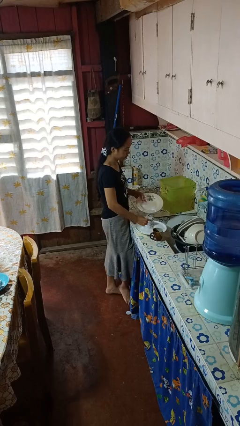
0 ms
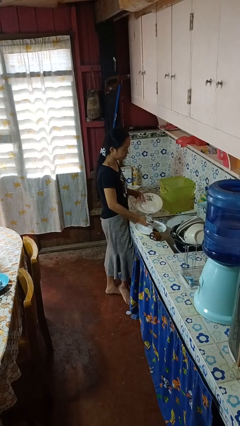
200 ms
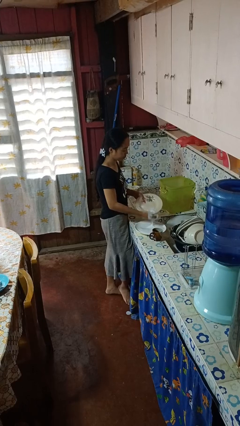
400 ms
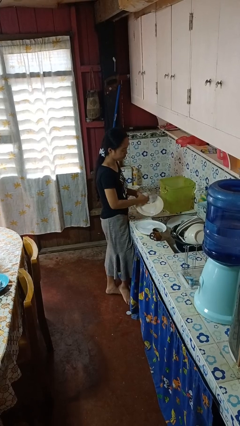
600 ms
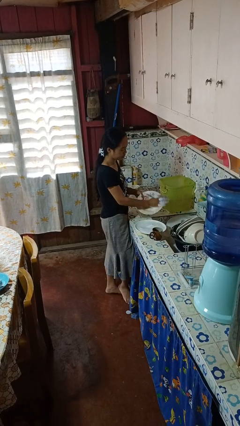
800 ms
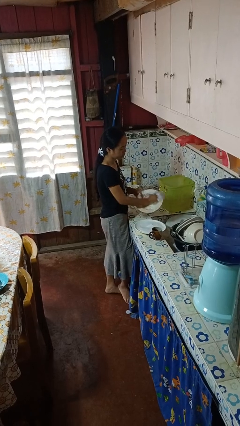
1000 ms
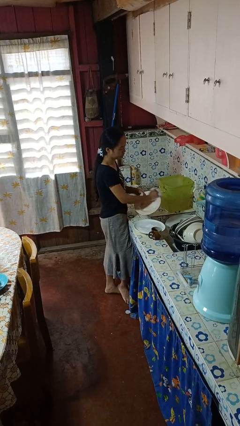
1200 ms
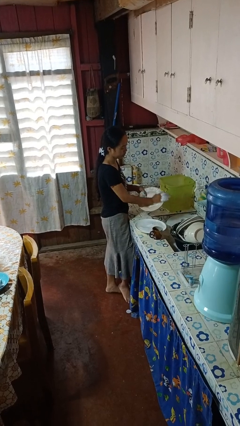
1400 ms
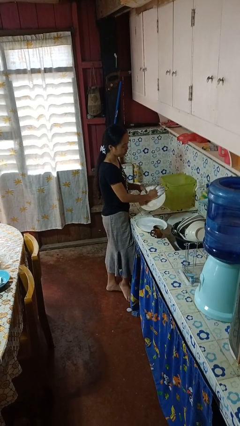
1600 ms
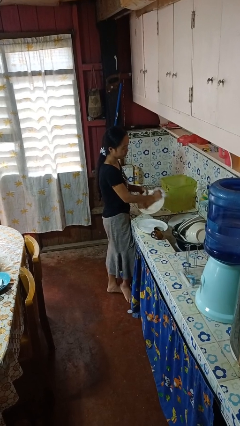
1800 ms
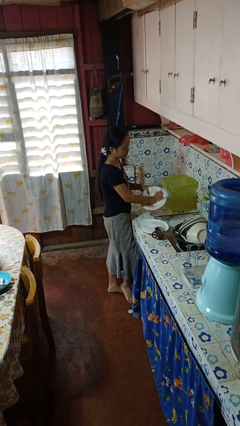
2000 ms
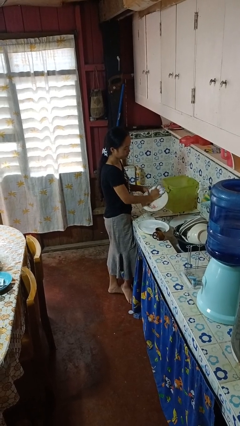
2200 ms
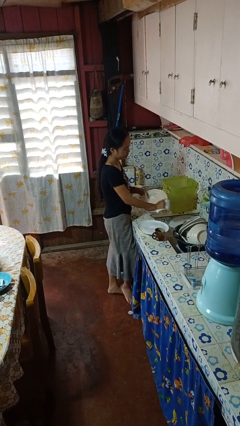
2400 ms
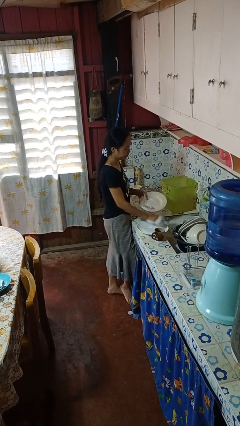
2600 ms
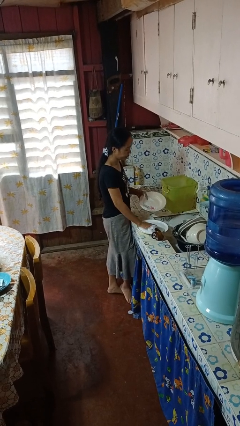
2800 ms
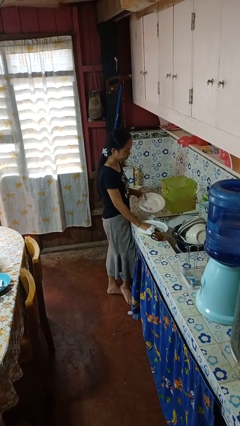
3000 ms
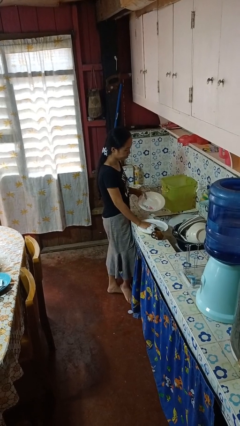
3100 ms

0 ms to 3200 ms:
person washes dish

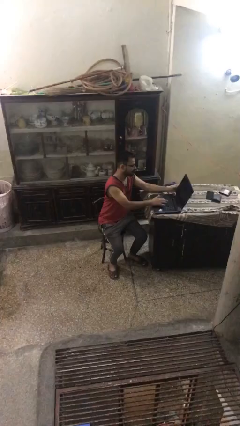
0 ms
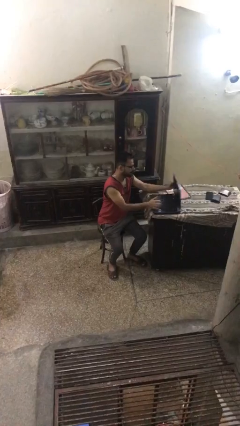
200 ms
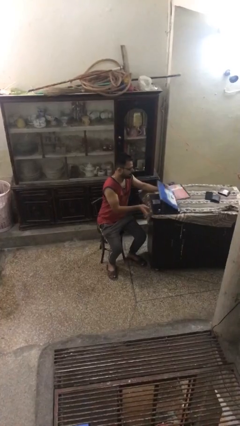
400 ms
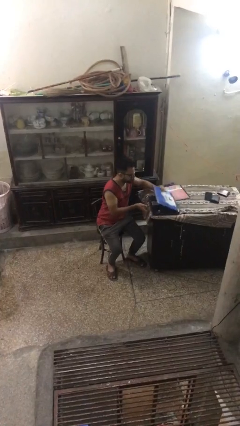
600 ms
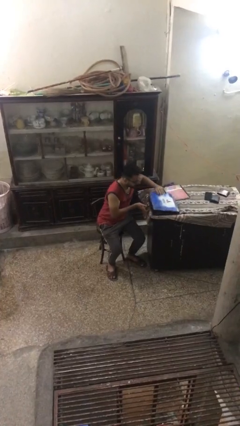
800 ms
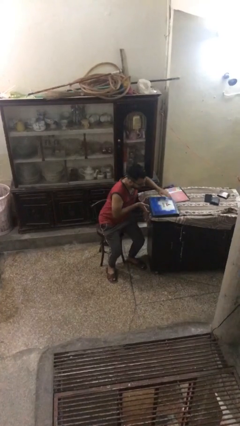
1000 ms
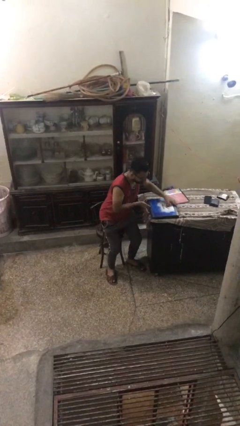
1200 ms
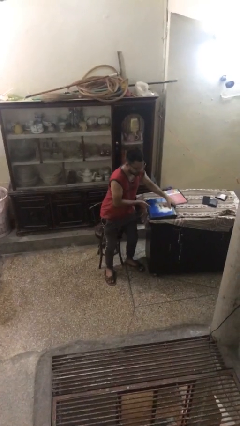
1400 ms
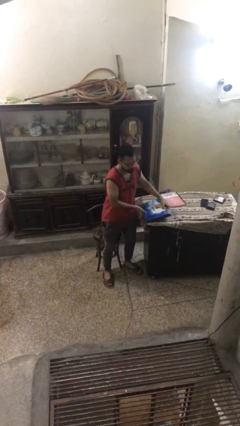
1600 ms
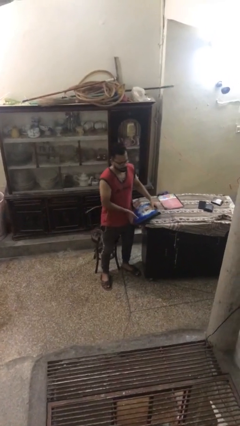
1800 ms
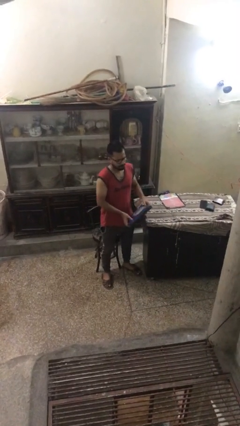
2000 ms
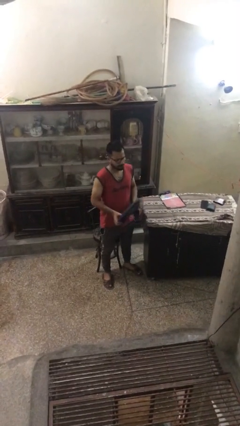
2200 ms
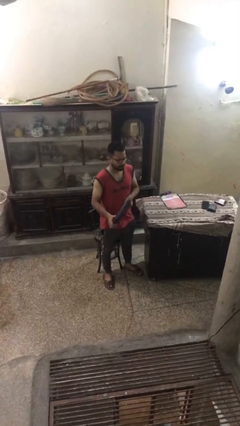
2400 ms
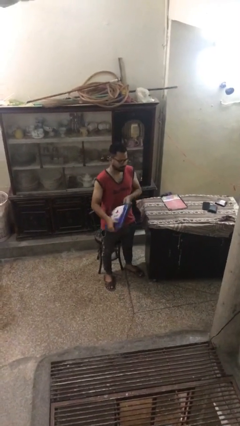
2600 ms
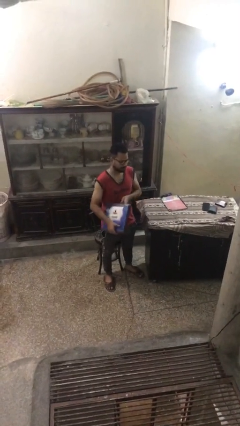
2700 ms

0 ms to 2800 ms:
person stands up

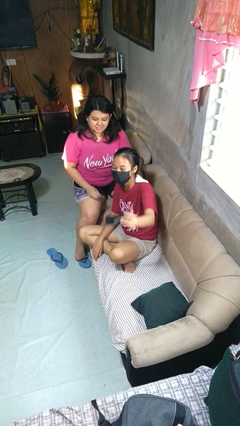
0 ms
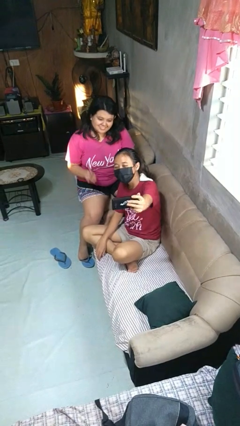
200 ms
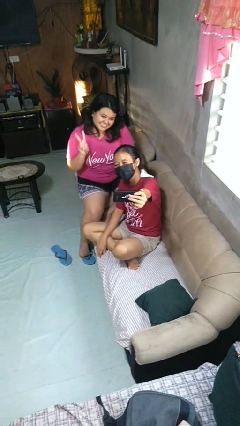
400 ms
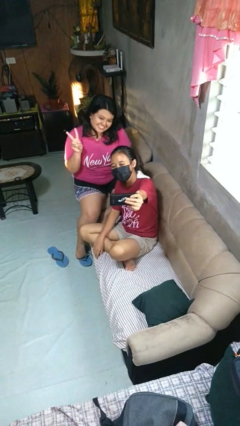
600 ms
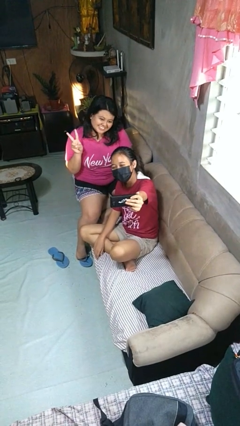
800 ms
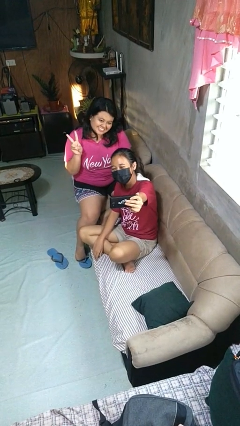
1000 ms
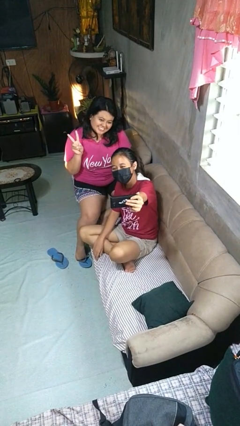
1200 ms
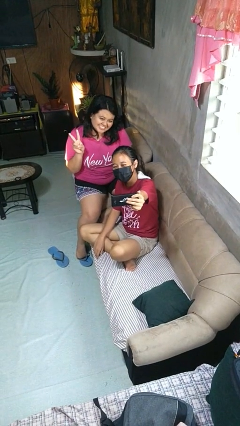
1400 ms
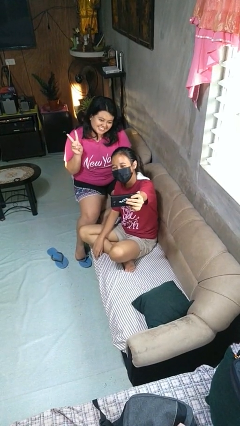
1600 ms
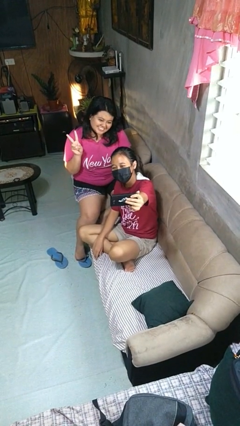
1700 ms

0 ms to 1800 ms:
person takes selfie with person

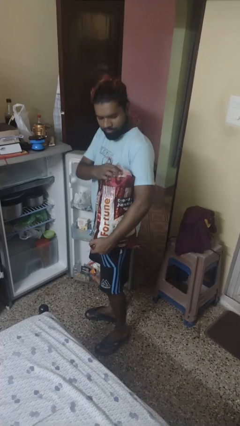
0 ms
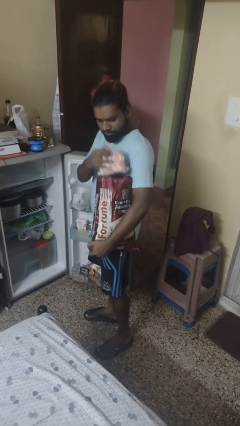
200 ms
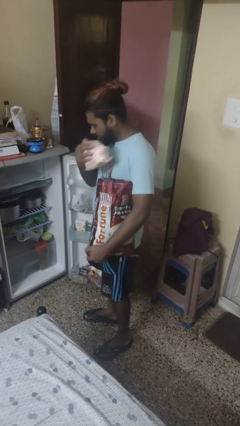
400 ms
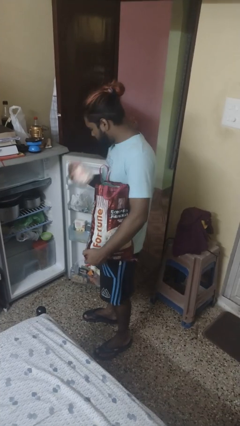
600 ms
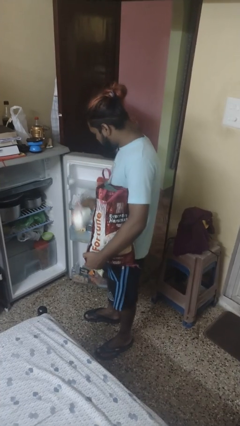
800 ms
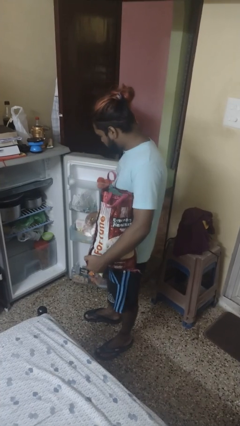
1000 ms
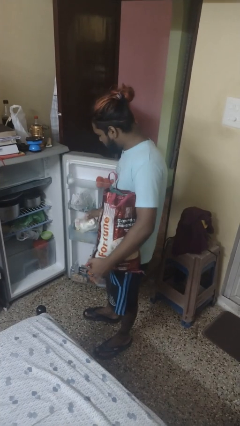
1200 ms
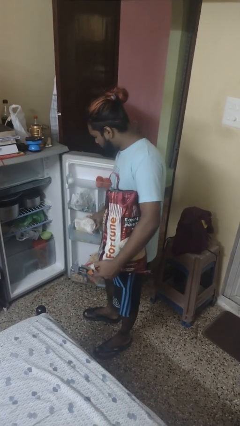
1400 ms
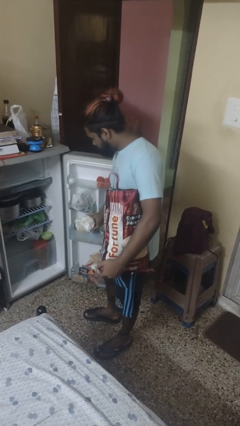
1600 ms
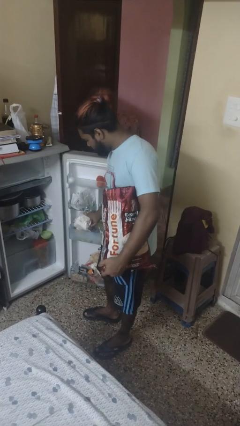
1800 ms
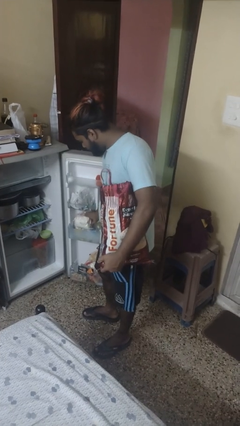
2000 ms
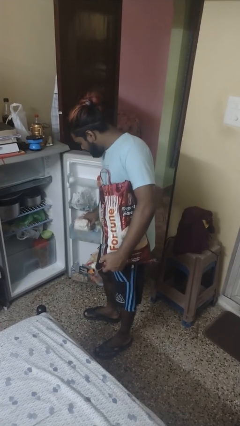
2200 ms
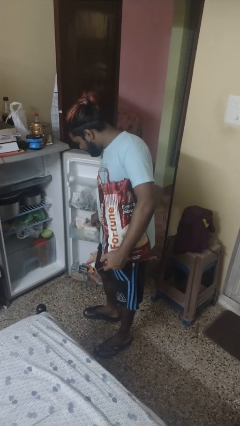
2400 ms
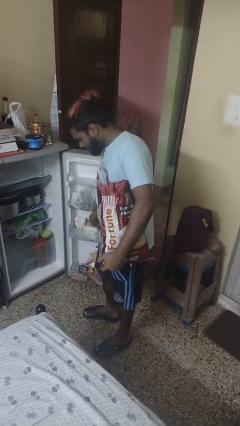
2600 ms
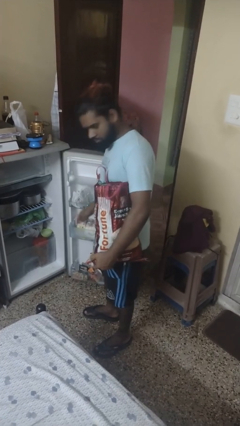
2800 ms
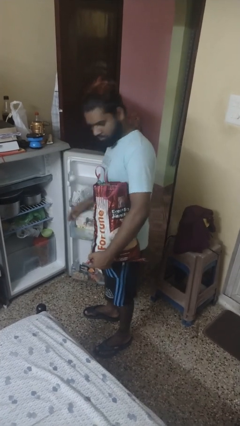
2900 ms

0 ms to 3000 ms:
person loads groceries into refrigerator

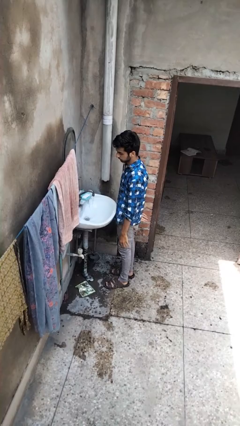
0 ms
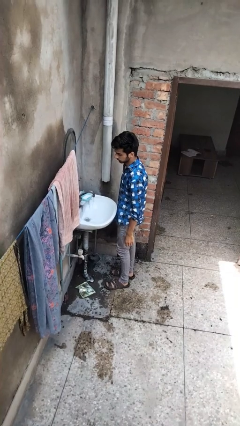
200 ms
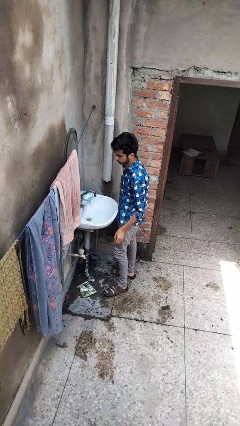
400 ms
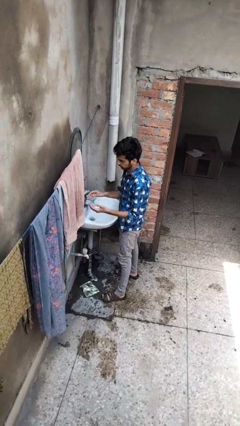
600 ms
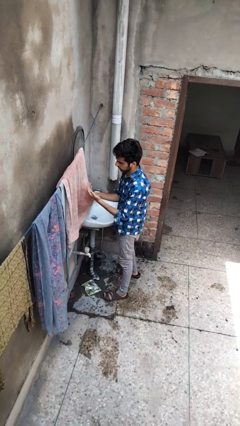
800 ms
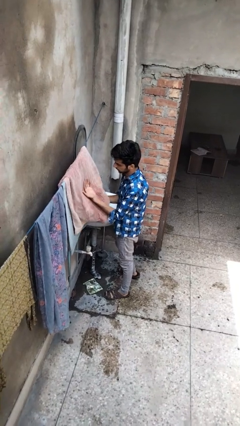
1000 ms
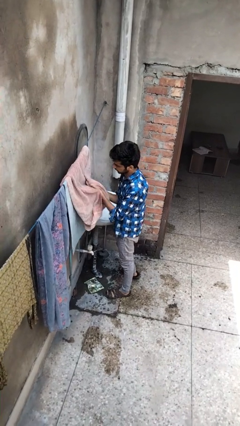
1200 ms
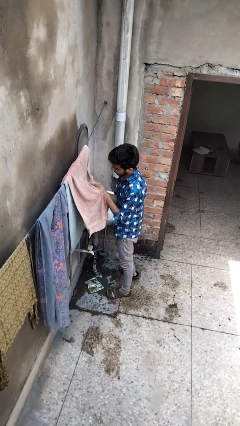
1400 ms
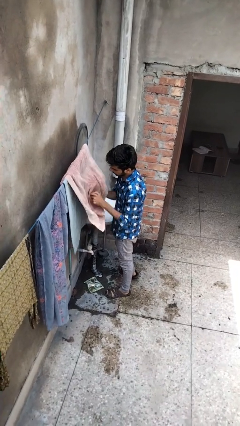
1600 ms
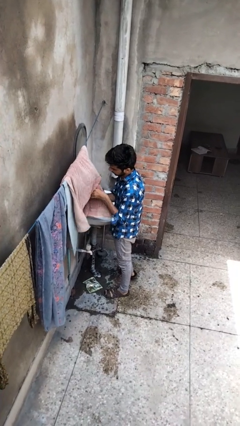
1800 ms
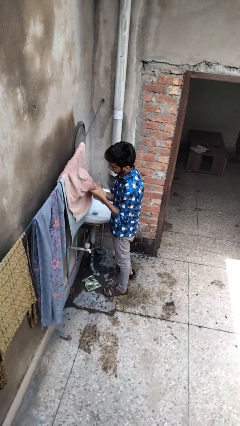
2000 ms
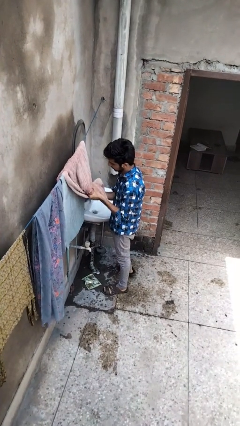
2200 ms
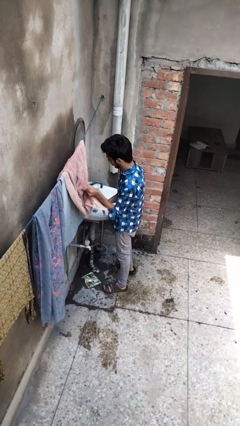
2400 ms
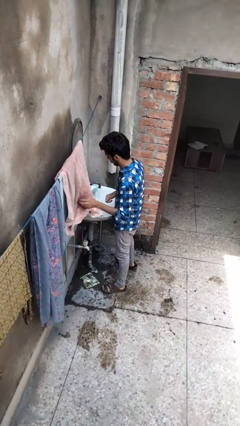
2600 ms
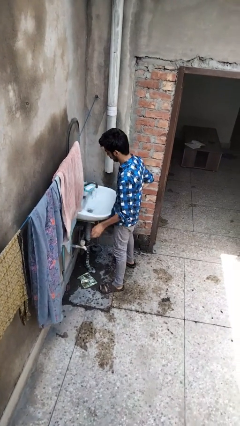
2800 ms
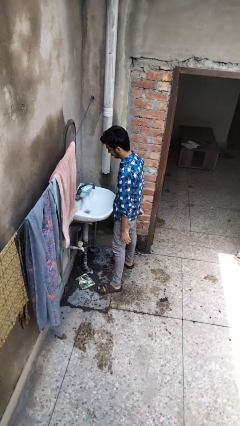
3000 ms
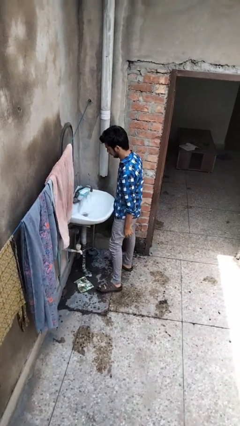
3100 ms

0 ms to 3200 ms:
person dries hands with towel

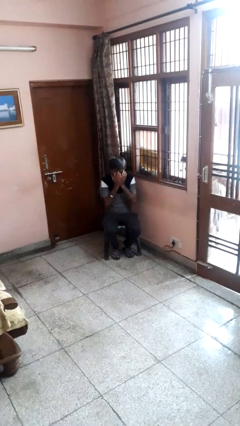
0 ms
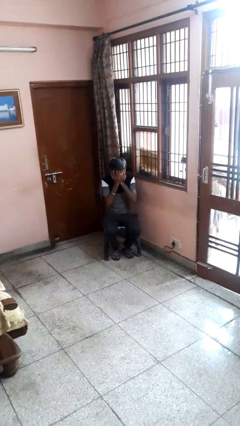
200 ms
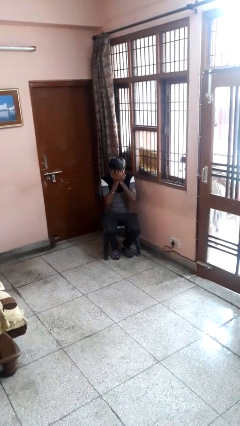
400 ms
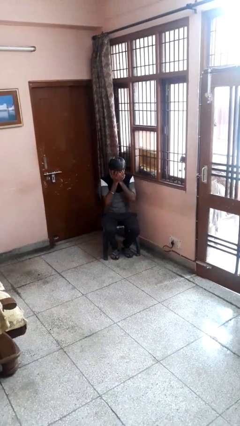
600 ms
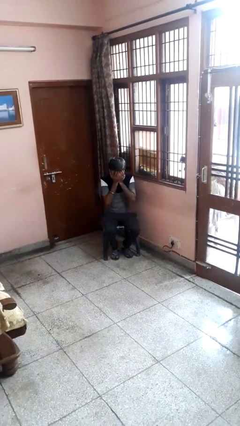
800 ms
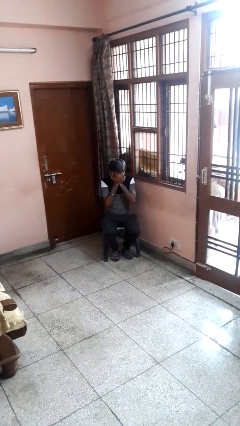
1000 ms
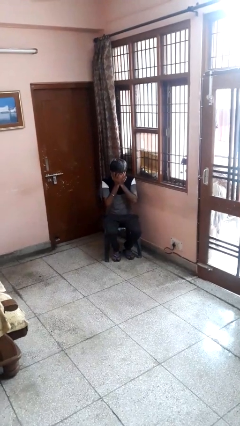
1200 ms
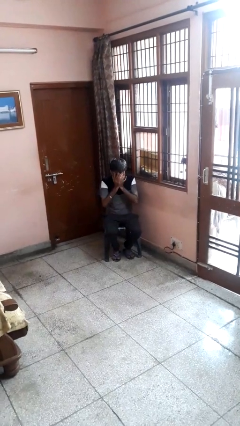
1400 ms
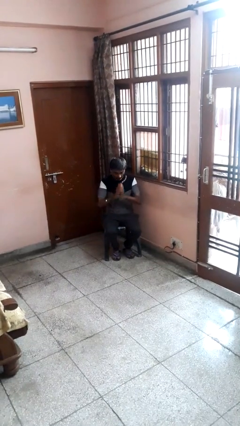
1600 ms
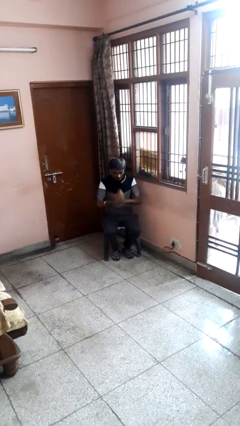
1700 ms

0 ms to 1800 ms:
person covers face with hands

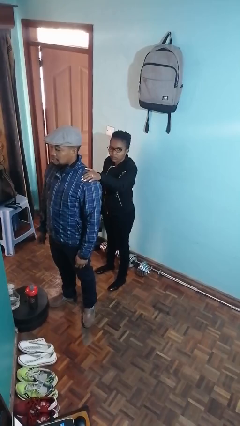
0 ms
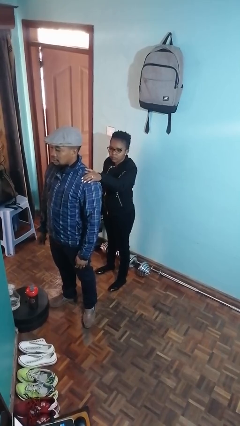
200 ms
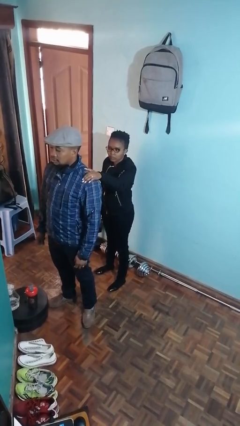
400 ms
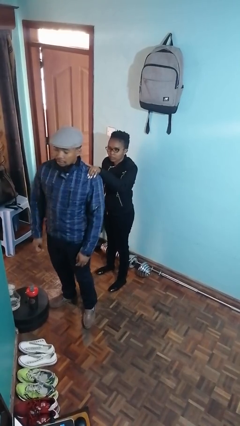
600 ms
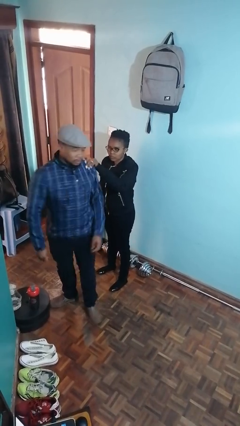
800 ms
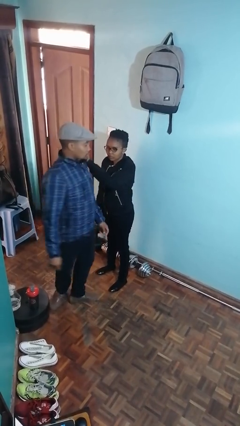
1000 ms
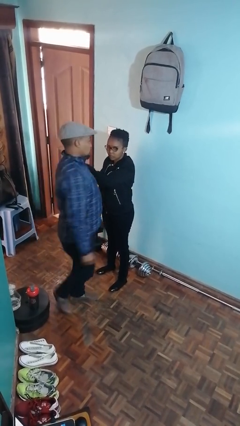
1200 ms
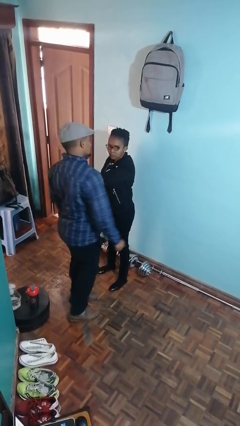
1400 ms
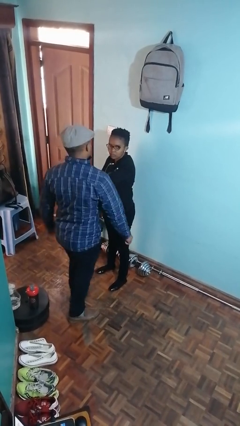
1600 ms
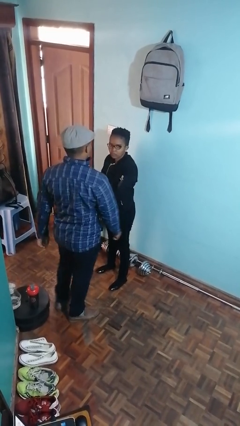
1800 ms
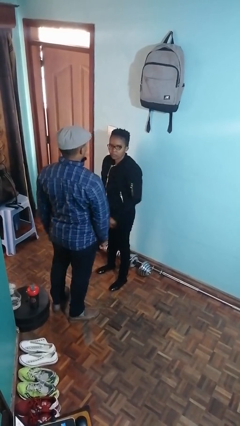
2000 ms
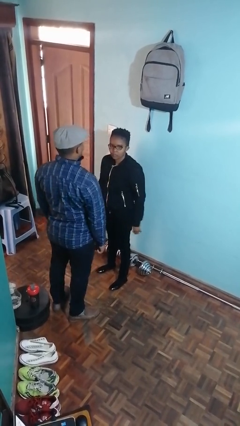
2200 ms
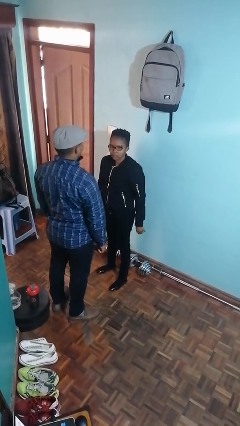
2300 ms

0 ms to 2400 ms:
person spins person around
